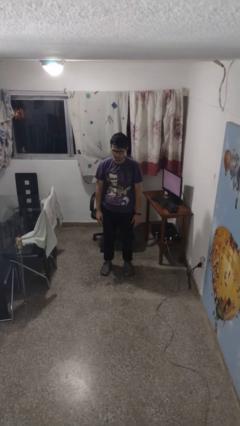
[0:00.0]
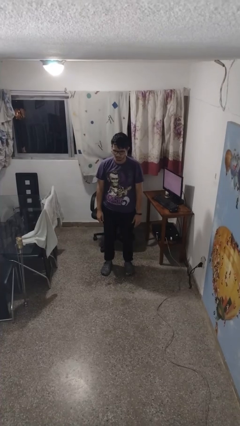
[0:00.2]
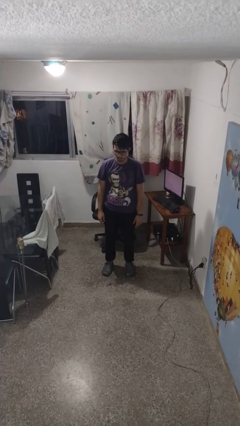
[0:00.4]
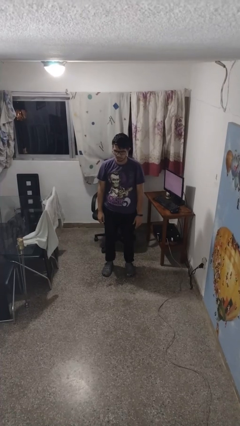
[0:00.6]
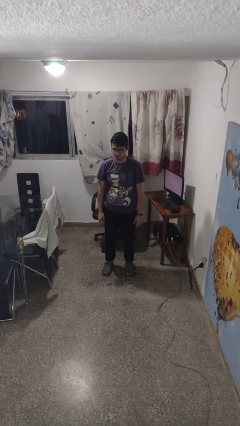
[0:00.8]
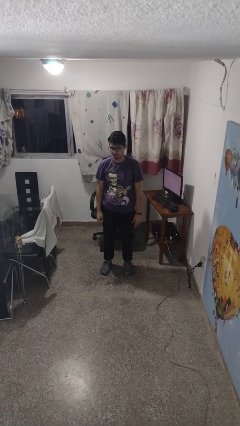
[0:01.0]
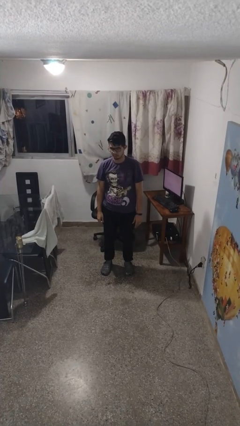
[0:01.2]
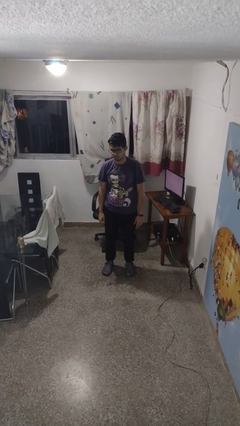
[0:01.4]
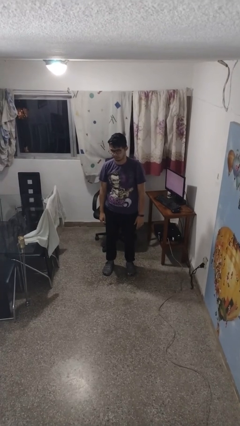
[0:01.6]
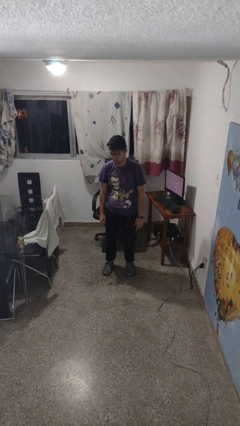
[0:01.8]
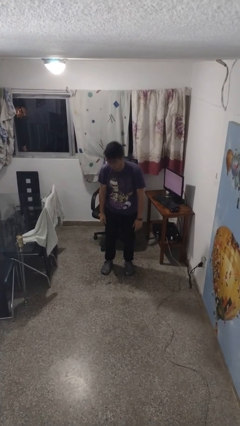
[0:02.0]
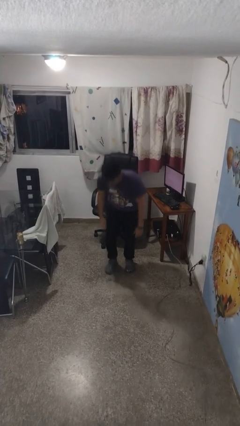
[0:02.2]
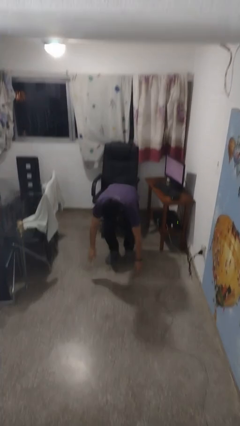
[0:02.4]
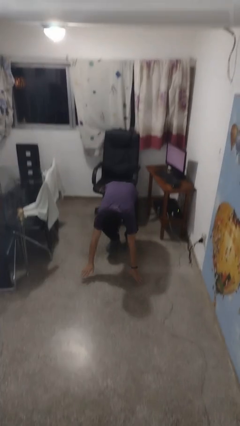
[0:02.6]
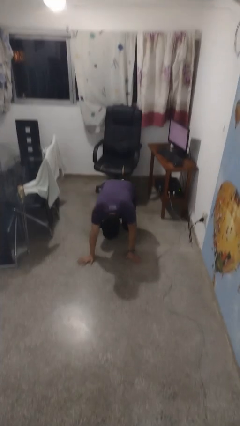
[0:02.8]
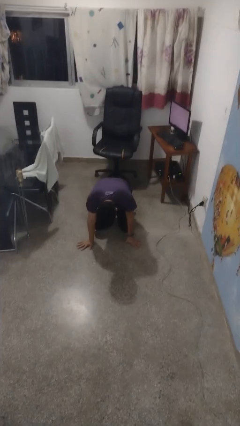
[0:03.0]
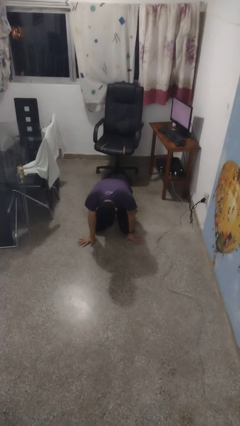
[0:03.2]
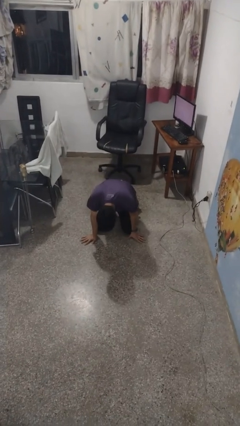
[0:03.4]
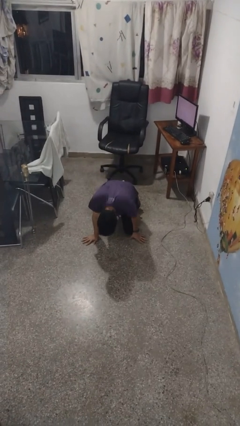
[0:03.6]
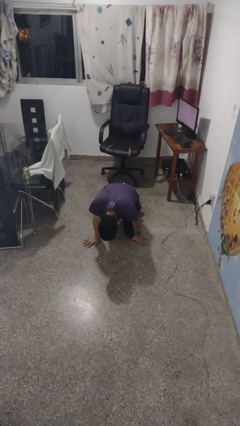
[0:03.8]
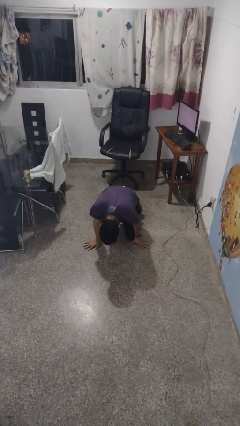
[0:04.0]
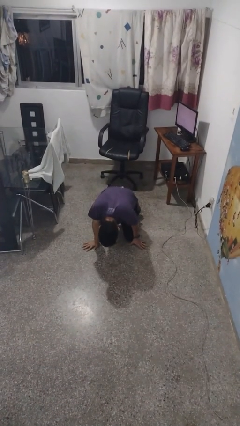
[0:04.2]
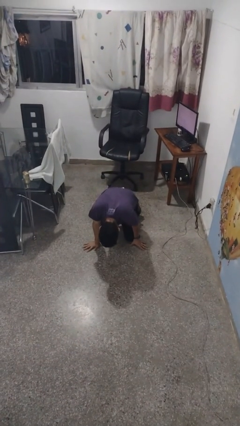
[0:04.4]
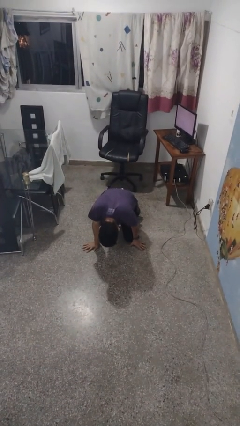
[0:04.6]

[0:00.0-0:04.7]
person falls while standing

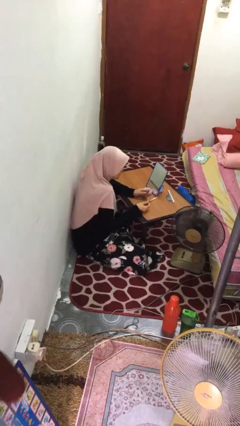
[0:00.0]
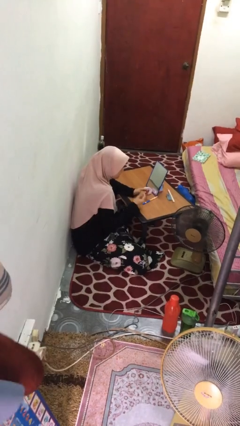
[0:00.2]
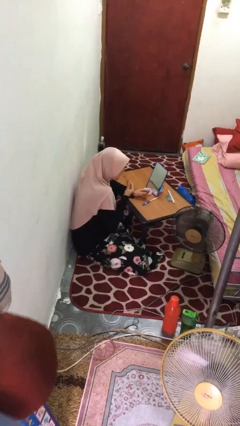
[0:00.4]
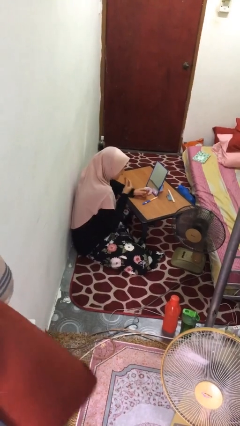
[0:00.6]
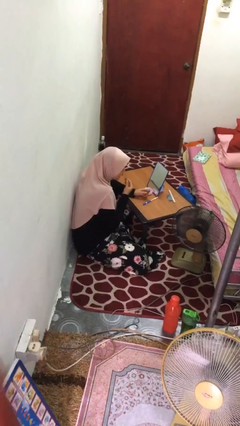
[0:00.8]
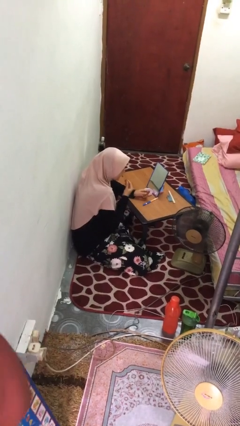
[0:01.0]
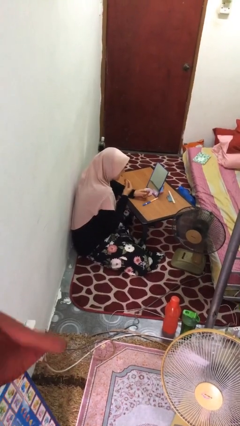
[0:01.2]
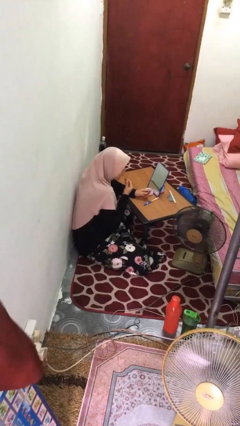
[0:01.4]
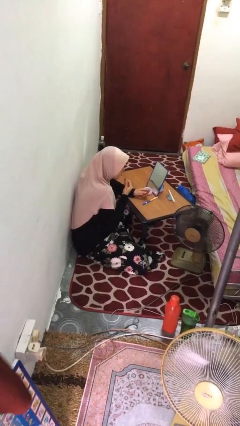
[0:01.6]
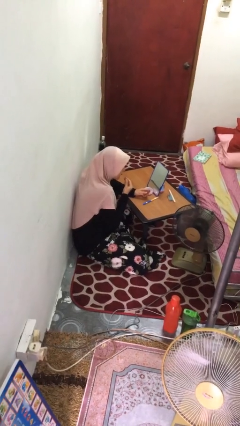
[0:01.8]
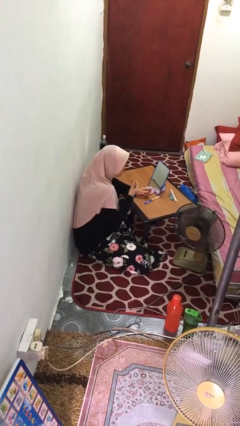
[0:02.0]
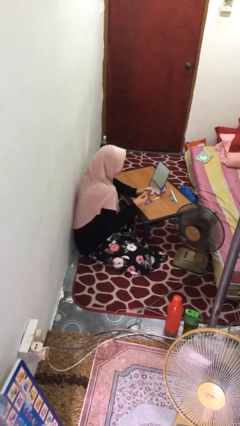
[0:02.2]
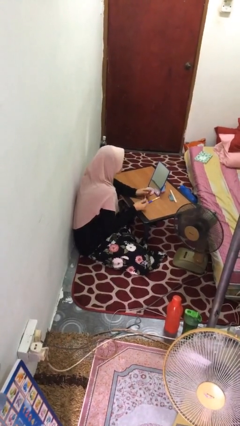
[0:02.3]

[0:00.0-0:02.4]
person applies lip makeup

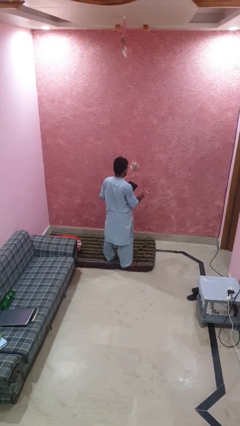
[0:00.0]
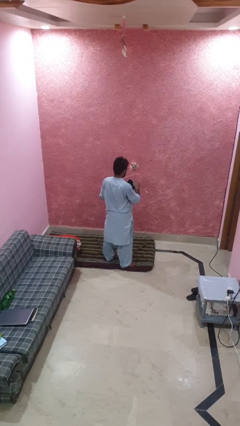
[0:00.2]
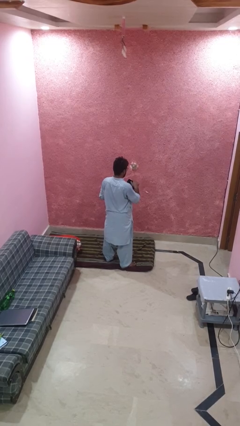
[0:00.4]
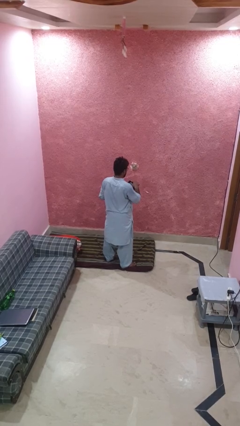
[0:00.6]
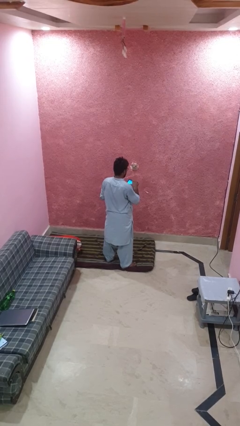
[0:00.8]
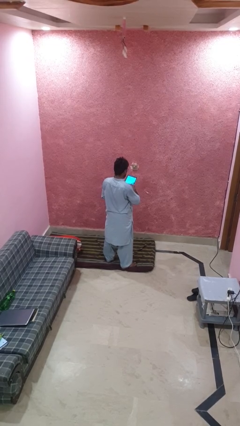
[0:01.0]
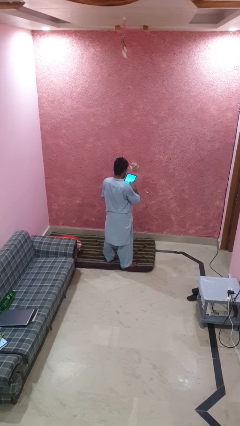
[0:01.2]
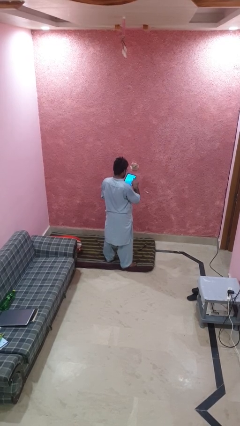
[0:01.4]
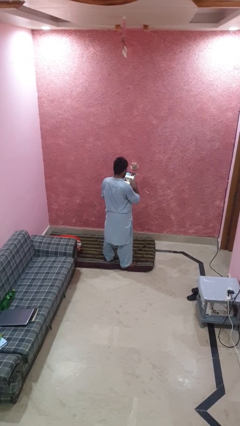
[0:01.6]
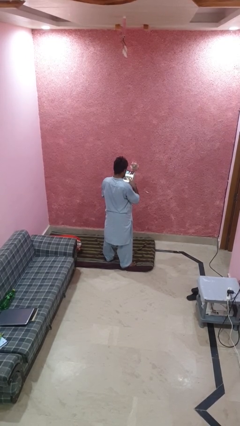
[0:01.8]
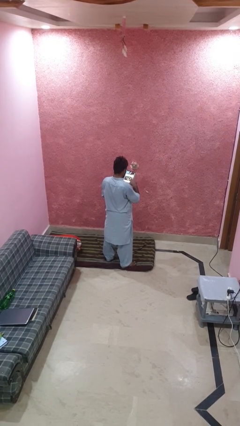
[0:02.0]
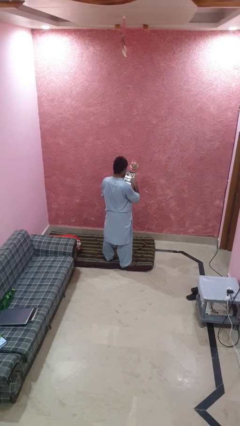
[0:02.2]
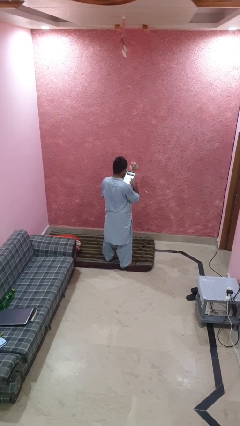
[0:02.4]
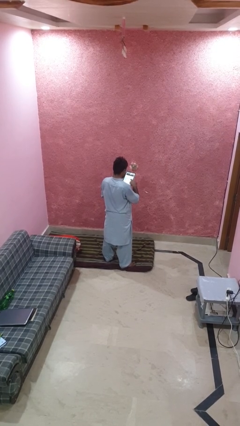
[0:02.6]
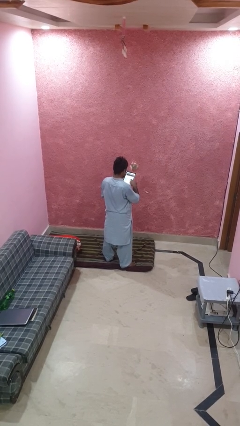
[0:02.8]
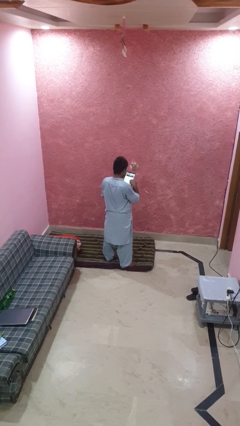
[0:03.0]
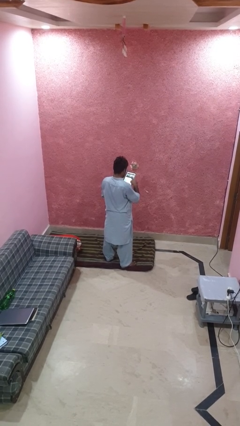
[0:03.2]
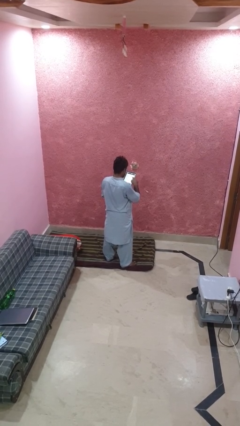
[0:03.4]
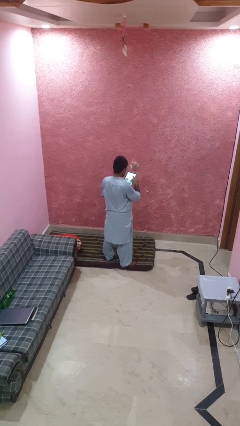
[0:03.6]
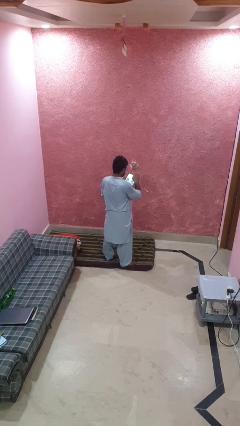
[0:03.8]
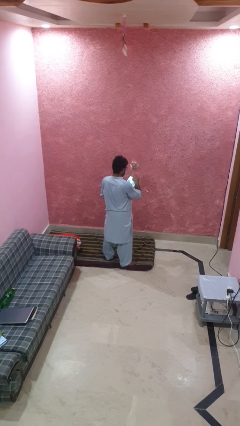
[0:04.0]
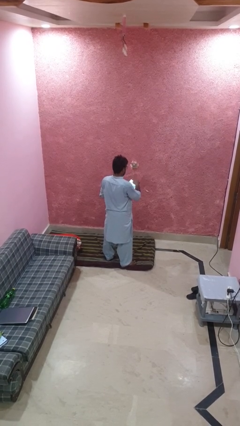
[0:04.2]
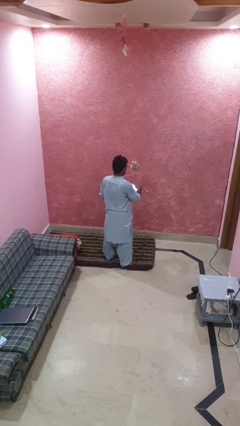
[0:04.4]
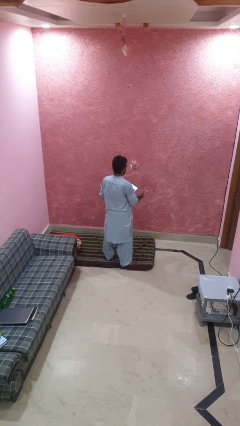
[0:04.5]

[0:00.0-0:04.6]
person interacts with tablet

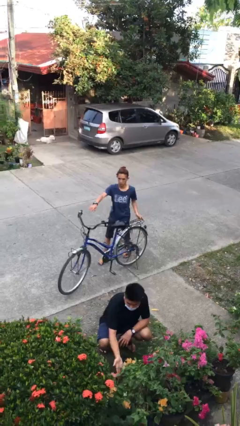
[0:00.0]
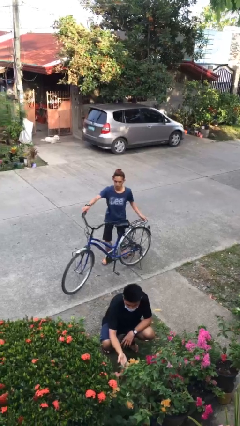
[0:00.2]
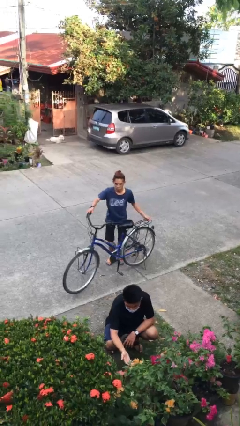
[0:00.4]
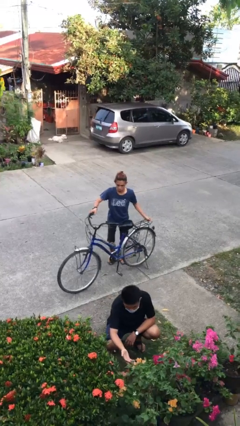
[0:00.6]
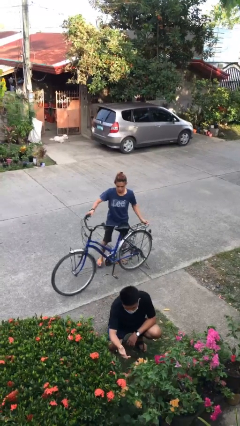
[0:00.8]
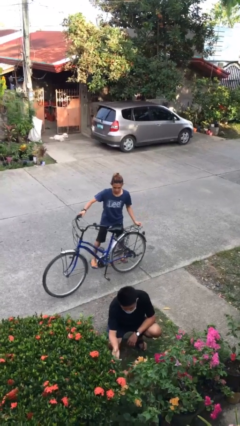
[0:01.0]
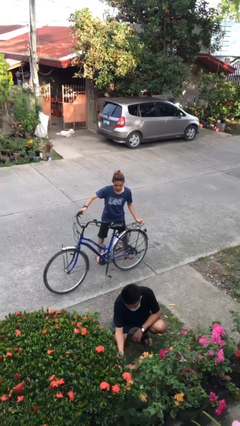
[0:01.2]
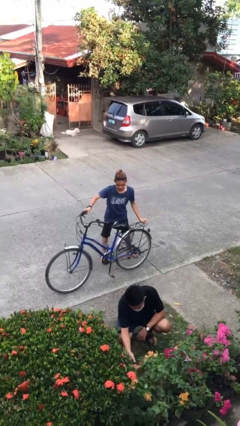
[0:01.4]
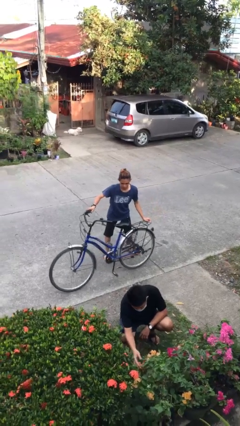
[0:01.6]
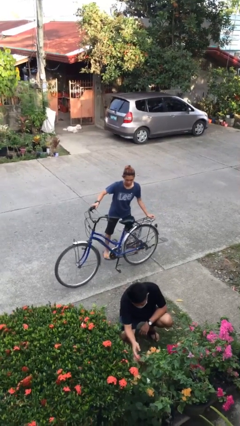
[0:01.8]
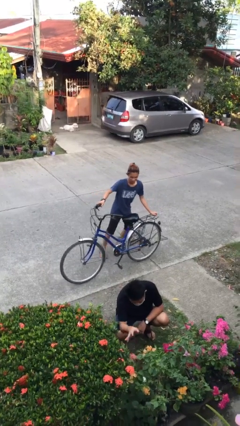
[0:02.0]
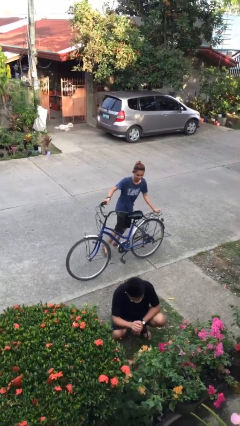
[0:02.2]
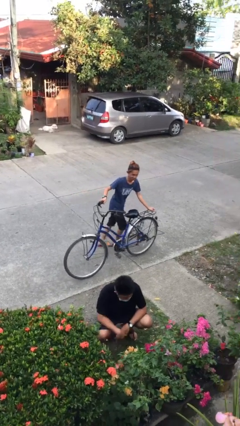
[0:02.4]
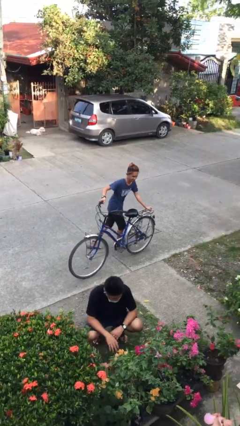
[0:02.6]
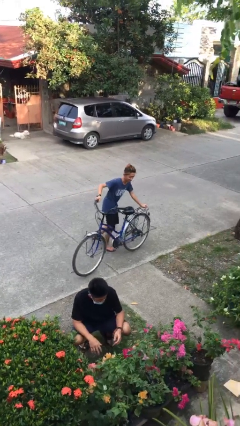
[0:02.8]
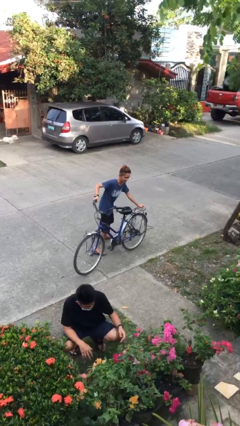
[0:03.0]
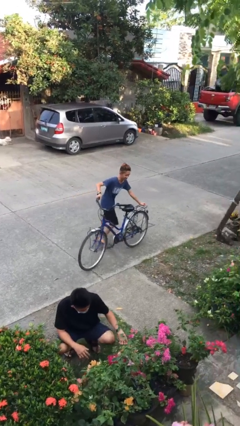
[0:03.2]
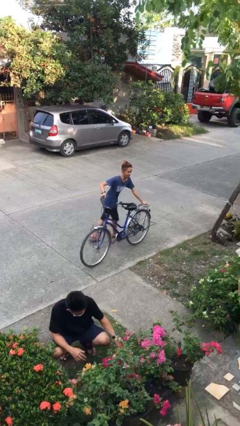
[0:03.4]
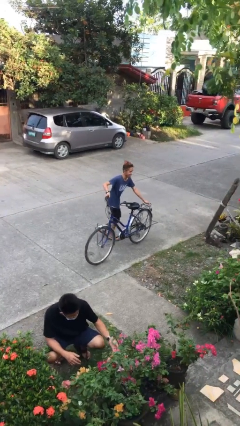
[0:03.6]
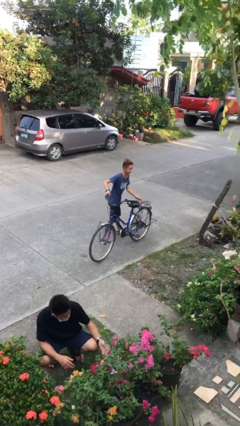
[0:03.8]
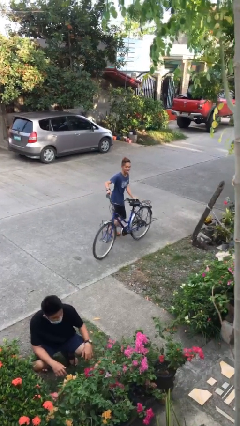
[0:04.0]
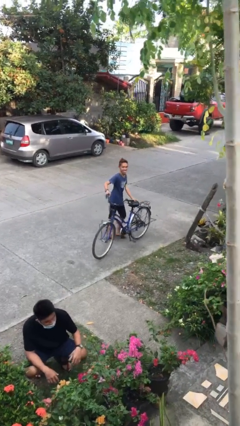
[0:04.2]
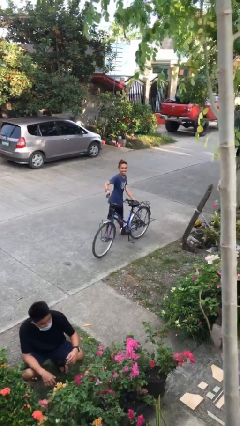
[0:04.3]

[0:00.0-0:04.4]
person steals object from person

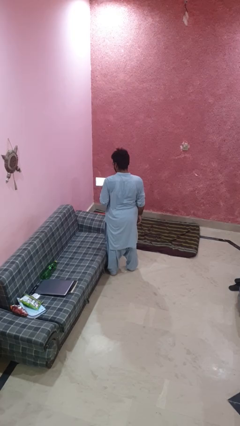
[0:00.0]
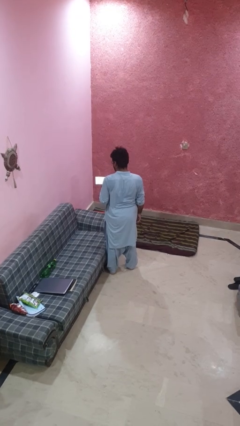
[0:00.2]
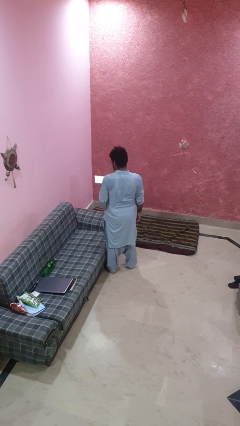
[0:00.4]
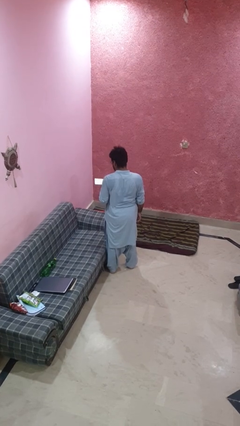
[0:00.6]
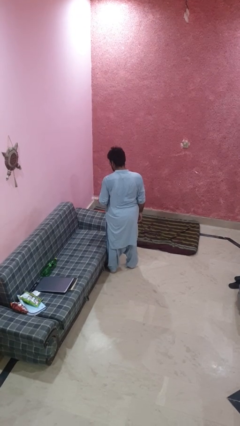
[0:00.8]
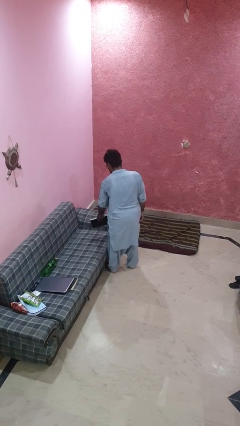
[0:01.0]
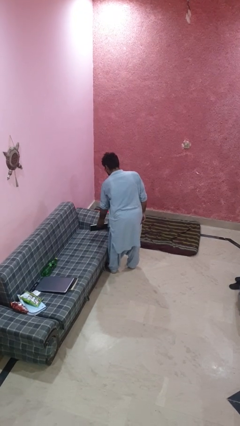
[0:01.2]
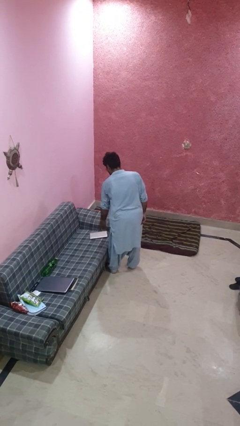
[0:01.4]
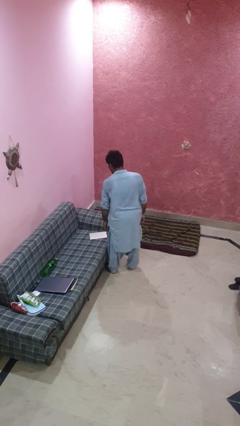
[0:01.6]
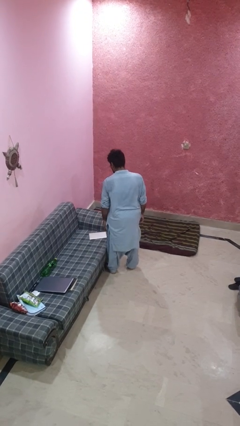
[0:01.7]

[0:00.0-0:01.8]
person puts down object on couch
